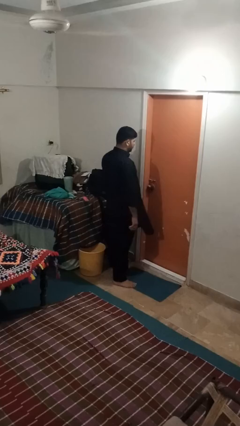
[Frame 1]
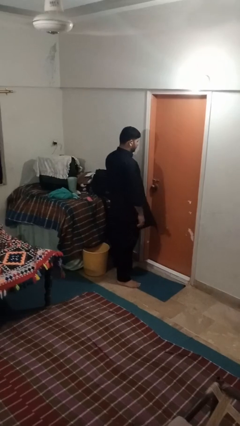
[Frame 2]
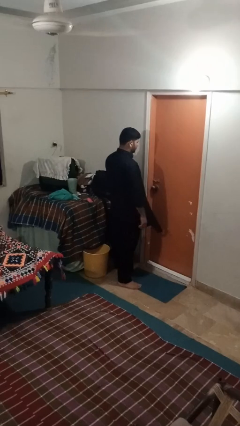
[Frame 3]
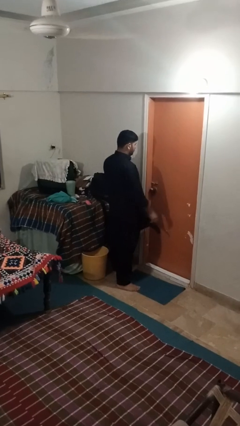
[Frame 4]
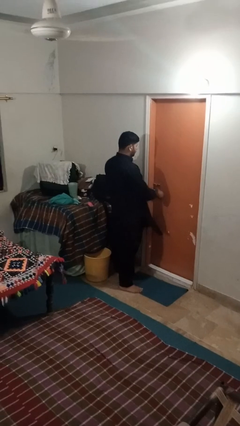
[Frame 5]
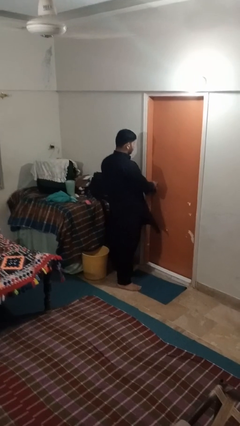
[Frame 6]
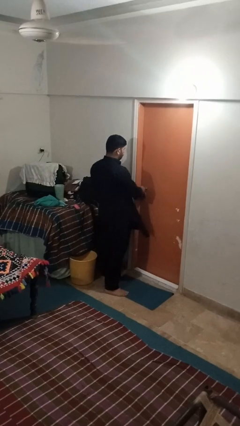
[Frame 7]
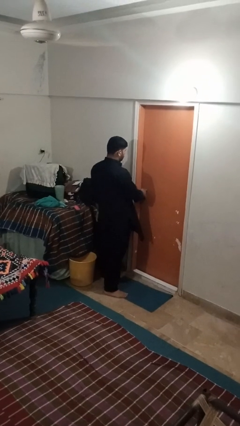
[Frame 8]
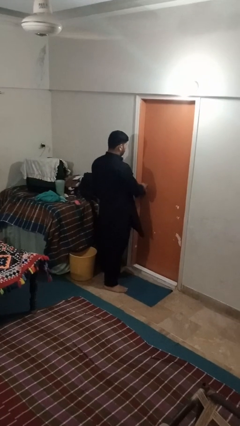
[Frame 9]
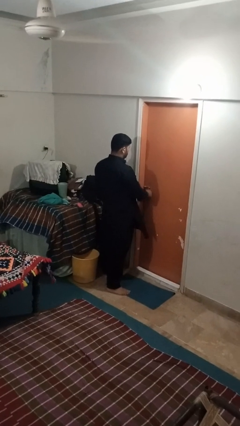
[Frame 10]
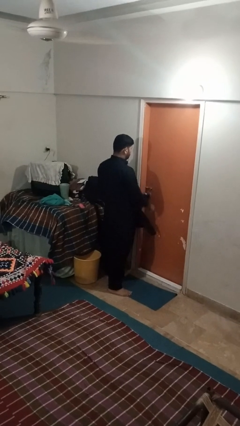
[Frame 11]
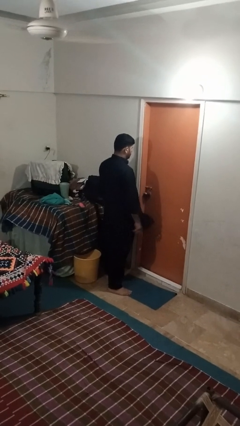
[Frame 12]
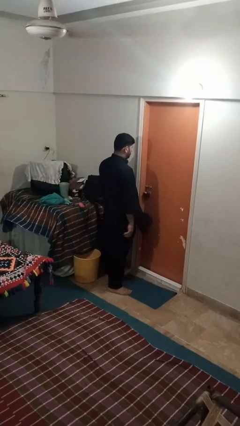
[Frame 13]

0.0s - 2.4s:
person unlocks door with keys

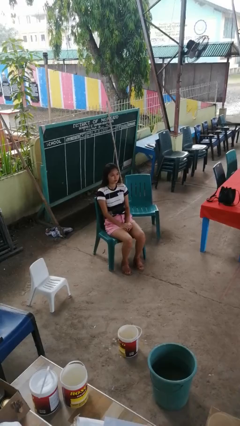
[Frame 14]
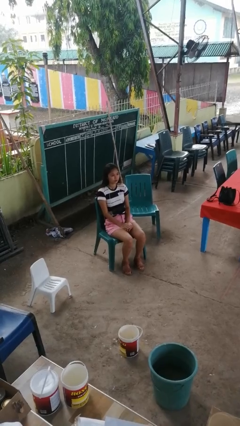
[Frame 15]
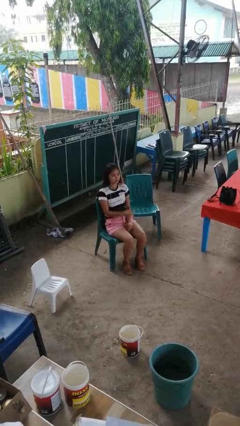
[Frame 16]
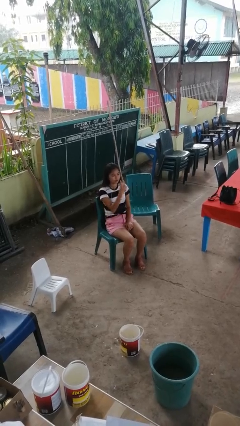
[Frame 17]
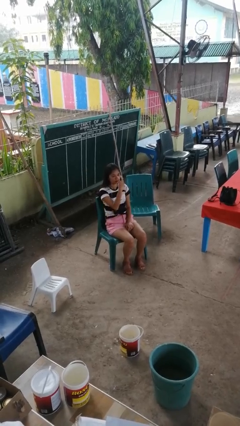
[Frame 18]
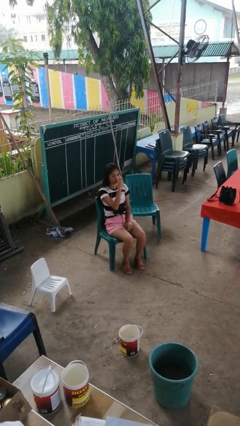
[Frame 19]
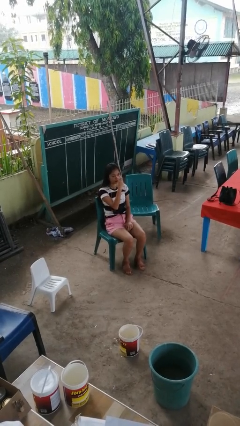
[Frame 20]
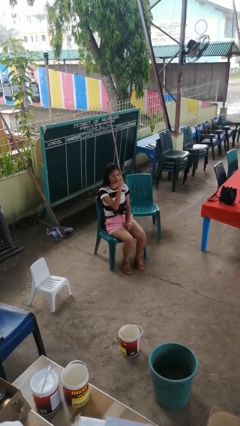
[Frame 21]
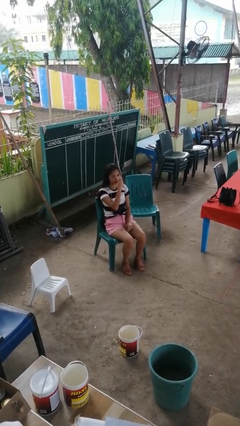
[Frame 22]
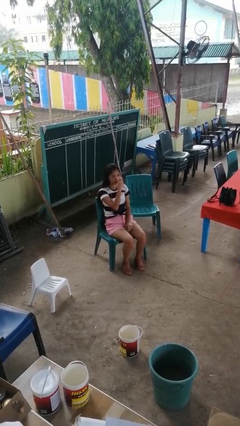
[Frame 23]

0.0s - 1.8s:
person gestures watch closely

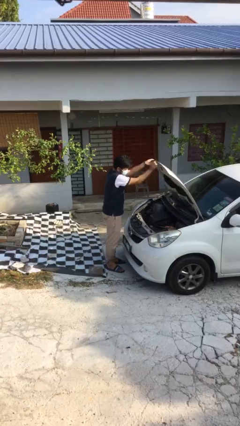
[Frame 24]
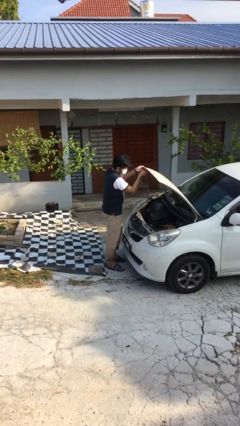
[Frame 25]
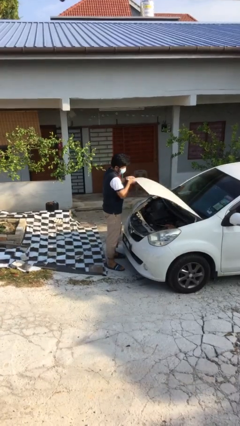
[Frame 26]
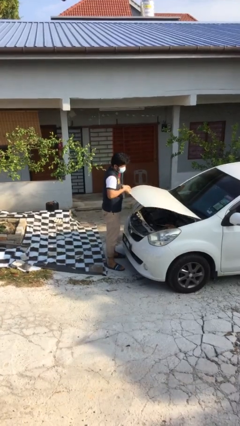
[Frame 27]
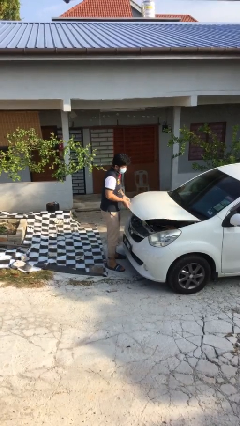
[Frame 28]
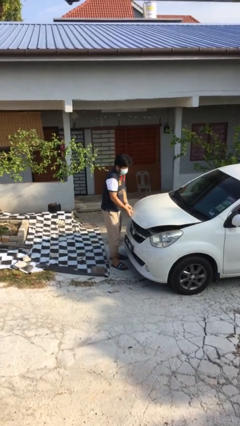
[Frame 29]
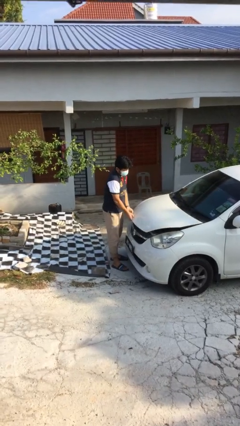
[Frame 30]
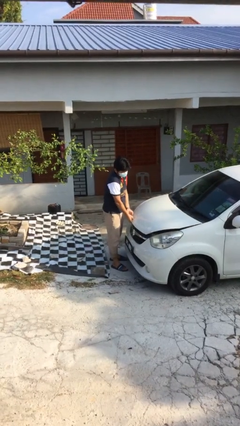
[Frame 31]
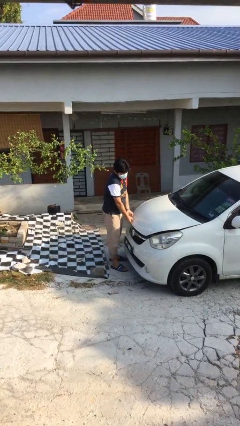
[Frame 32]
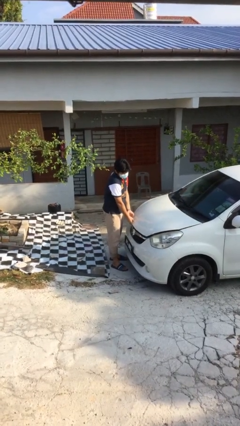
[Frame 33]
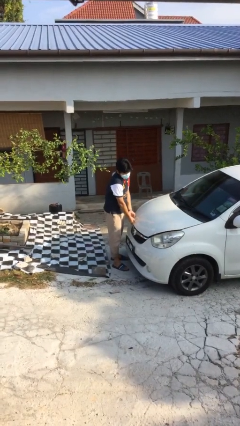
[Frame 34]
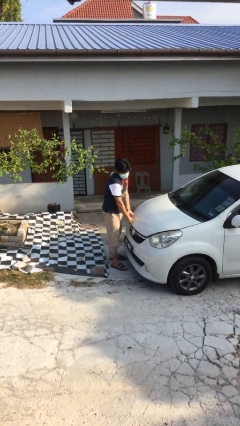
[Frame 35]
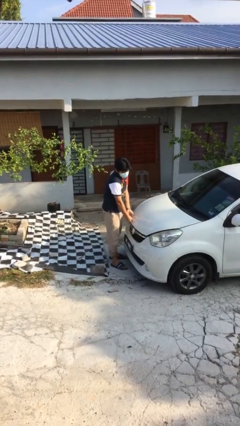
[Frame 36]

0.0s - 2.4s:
person closes car hood

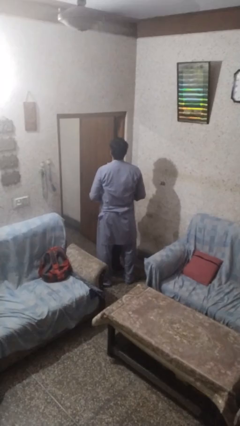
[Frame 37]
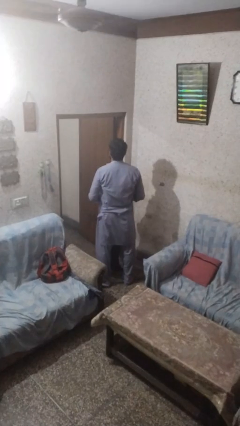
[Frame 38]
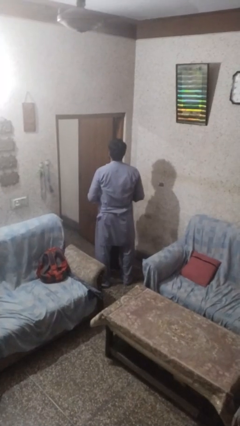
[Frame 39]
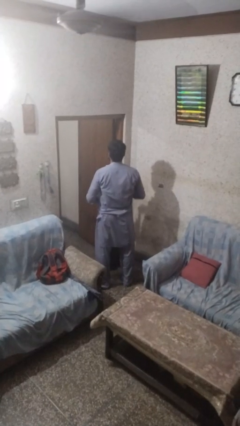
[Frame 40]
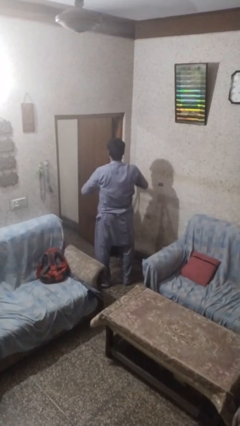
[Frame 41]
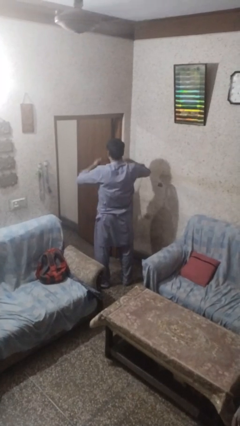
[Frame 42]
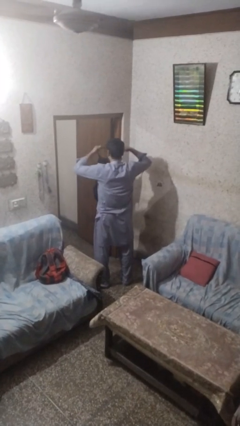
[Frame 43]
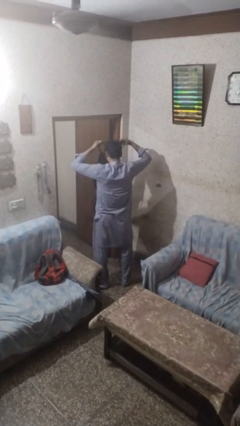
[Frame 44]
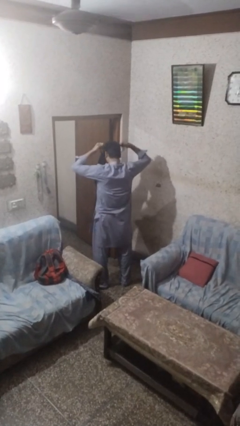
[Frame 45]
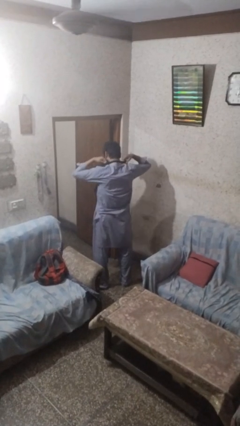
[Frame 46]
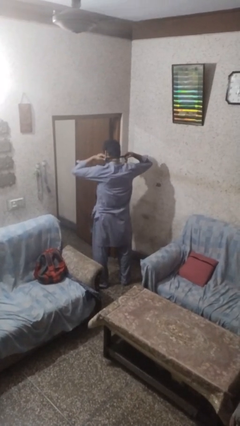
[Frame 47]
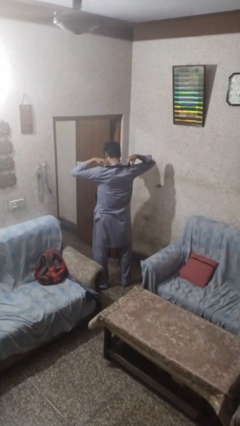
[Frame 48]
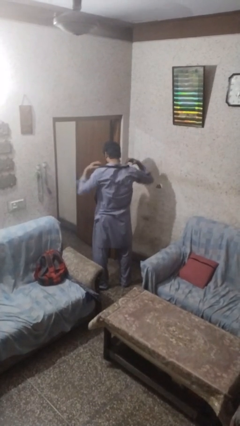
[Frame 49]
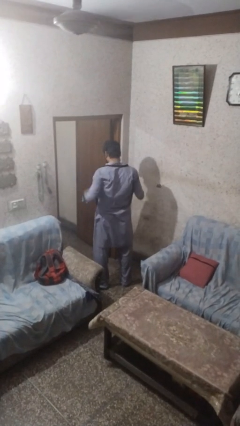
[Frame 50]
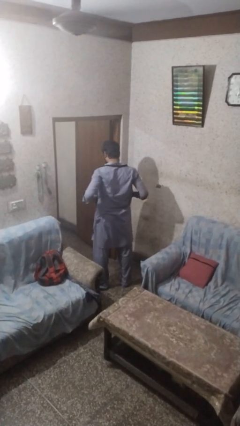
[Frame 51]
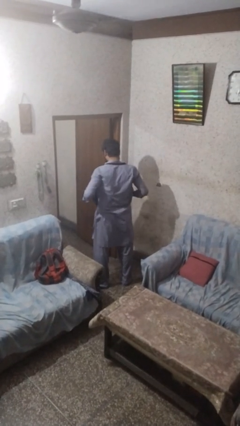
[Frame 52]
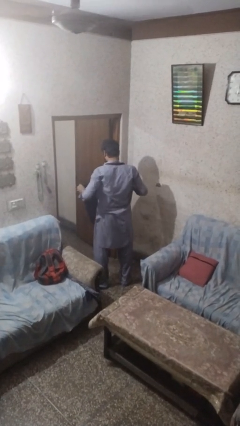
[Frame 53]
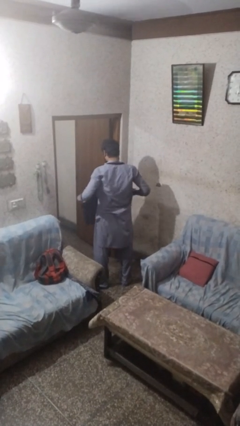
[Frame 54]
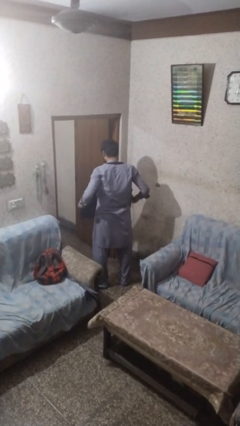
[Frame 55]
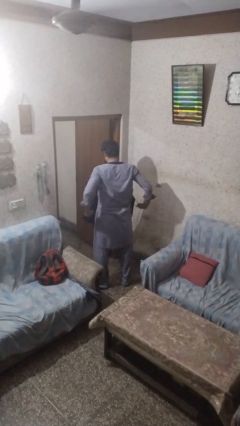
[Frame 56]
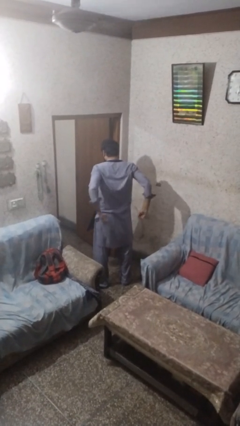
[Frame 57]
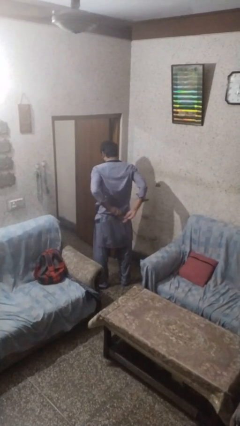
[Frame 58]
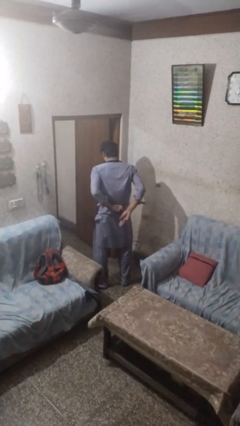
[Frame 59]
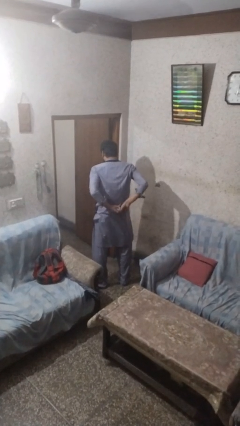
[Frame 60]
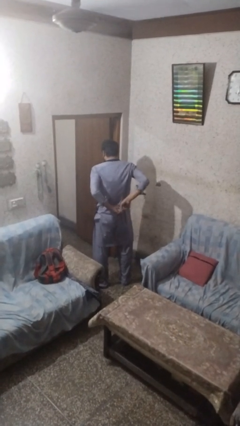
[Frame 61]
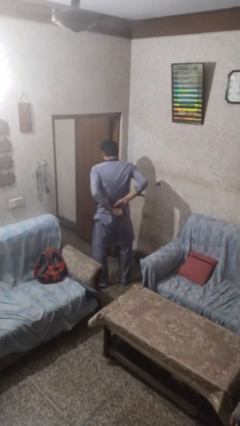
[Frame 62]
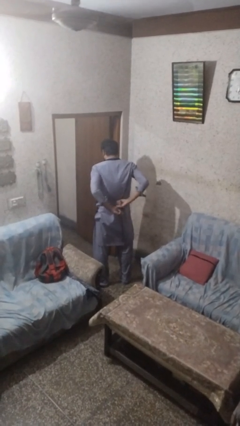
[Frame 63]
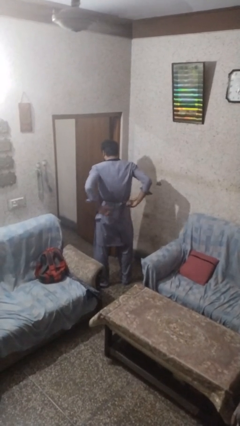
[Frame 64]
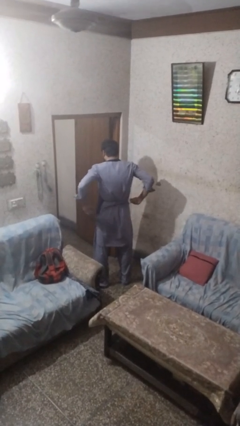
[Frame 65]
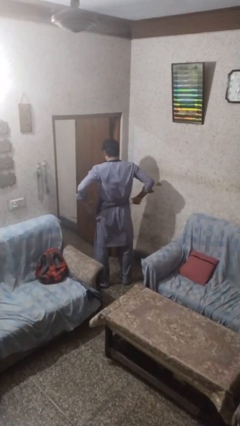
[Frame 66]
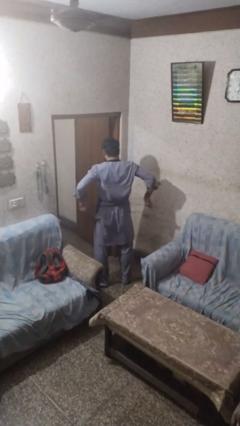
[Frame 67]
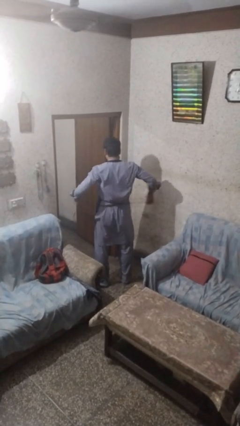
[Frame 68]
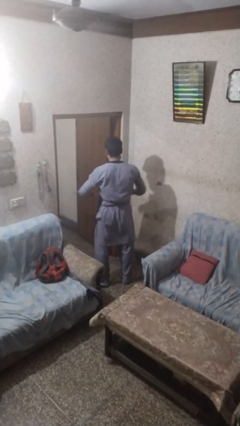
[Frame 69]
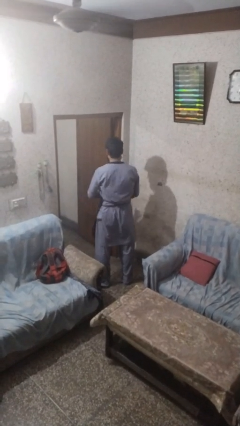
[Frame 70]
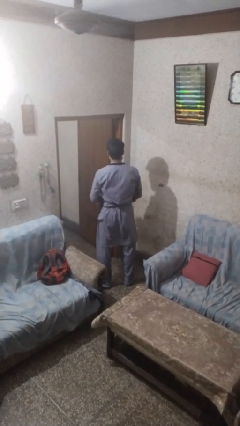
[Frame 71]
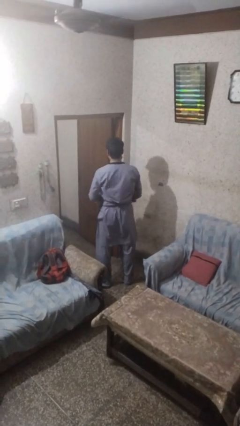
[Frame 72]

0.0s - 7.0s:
person puts on apron

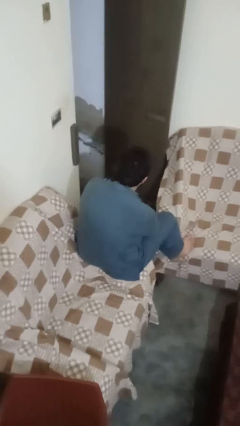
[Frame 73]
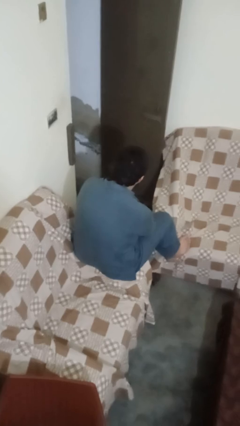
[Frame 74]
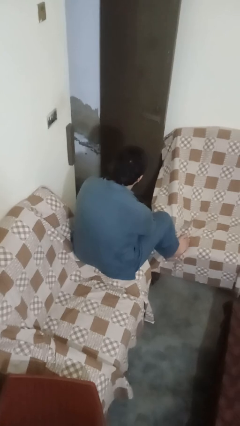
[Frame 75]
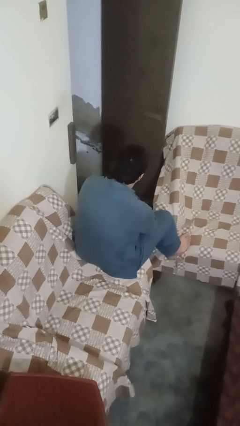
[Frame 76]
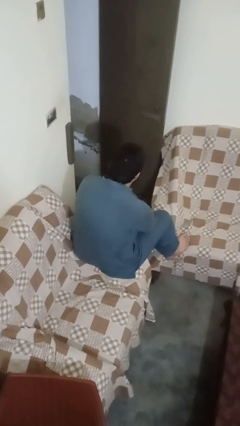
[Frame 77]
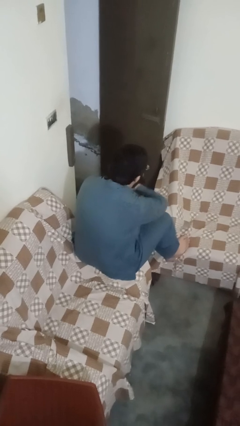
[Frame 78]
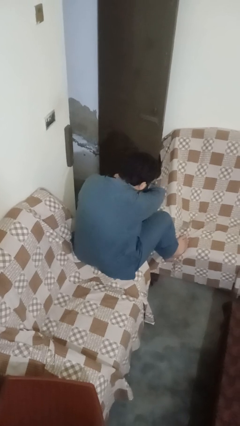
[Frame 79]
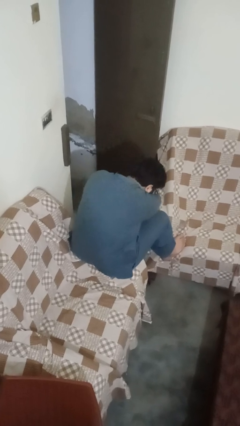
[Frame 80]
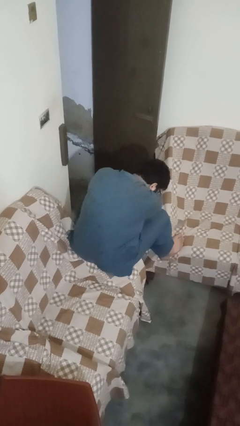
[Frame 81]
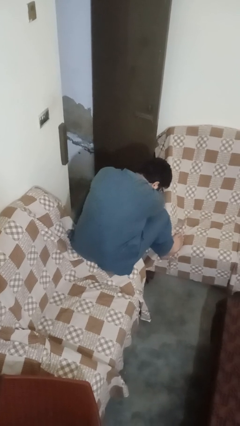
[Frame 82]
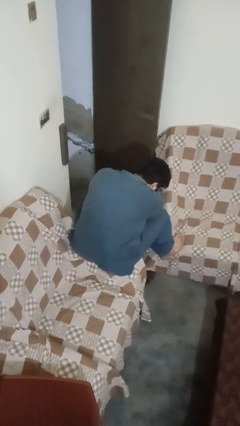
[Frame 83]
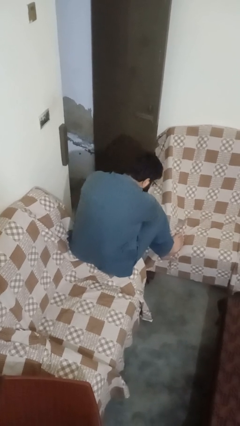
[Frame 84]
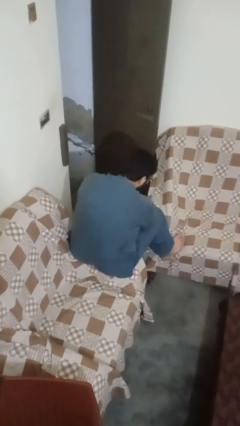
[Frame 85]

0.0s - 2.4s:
person sneezes into arm

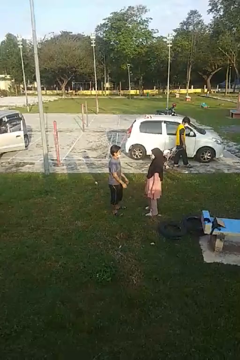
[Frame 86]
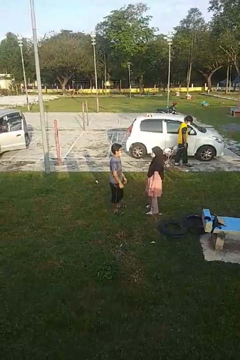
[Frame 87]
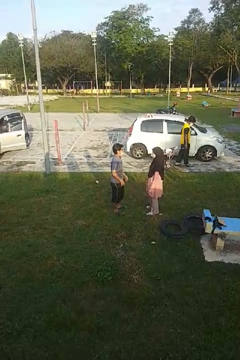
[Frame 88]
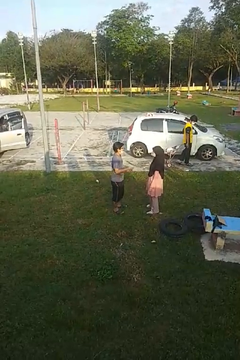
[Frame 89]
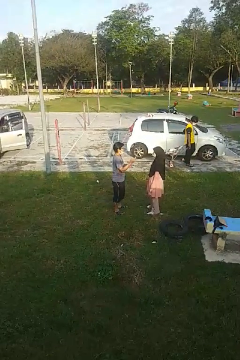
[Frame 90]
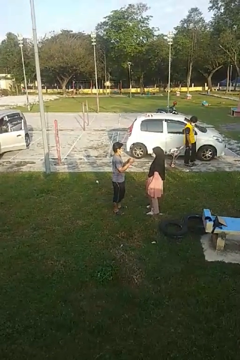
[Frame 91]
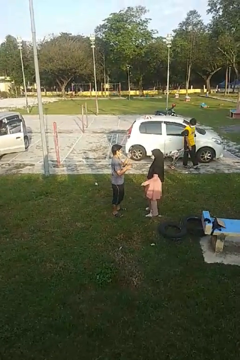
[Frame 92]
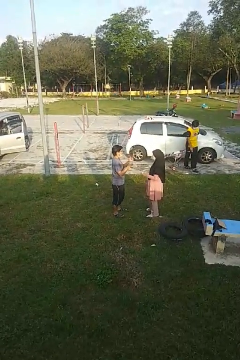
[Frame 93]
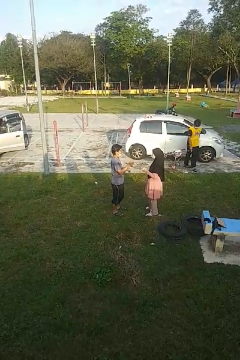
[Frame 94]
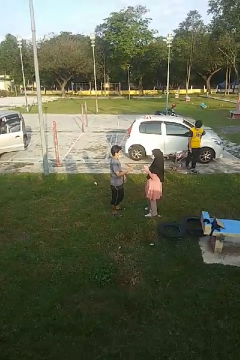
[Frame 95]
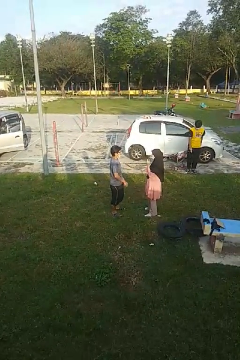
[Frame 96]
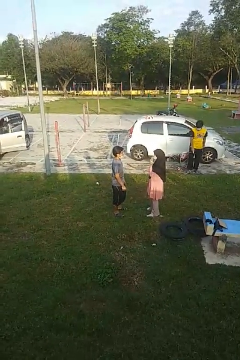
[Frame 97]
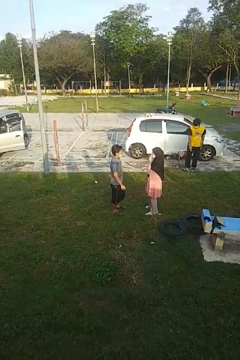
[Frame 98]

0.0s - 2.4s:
person talks to person
